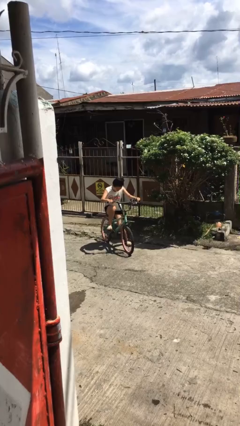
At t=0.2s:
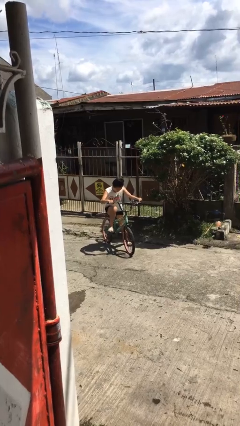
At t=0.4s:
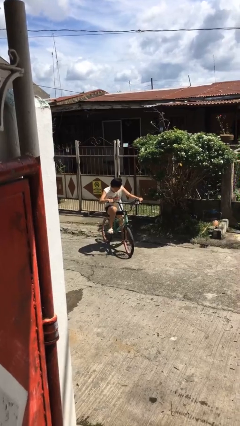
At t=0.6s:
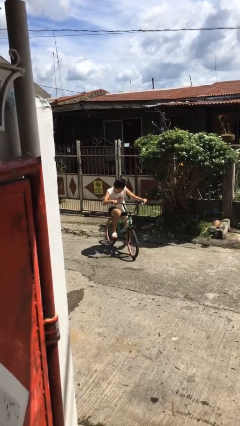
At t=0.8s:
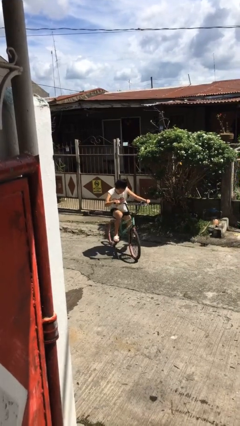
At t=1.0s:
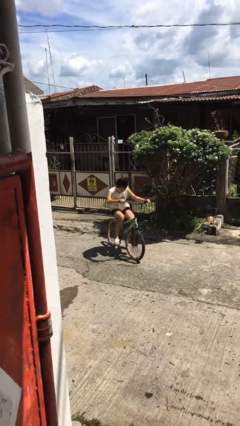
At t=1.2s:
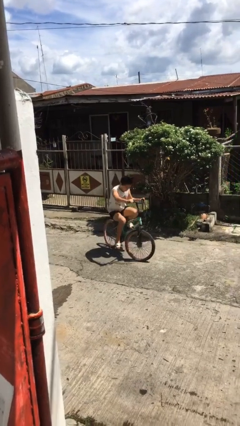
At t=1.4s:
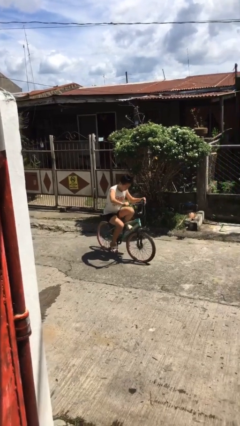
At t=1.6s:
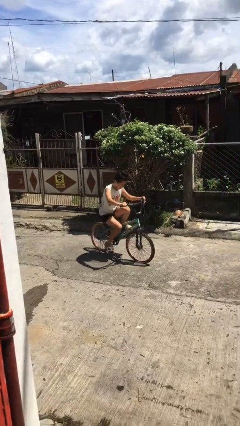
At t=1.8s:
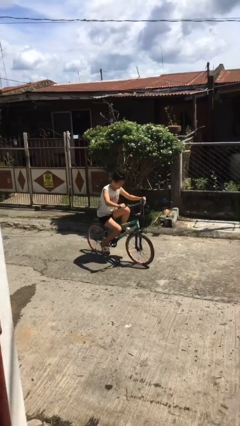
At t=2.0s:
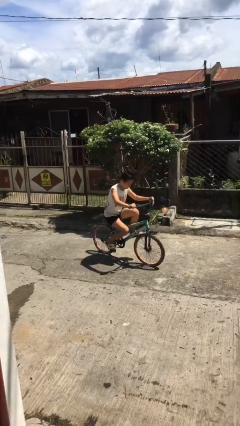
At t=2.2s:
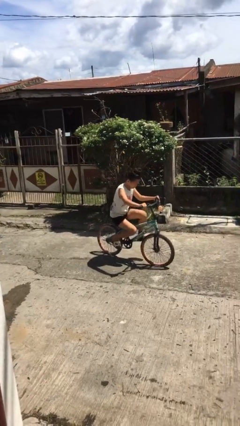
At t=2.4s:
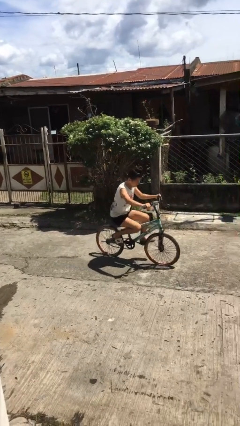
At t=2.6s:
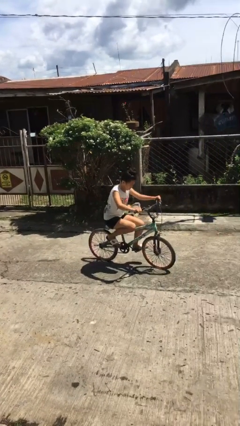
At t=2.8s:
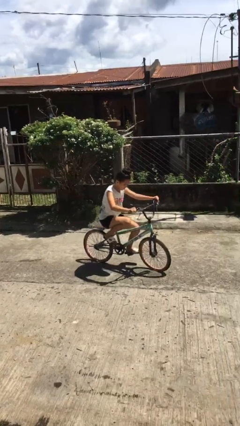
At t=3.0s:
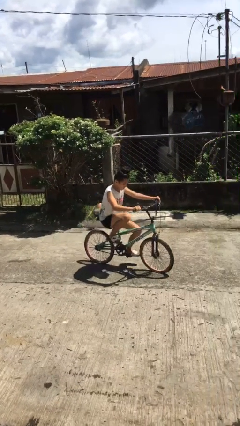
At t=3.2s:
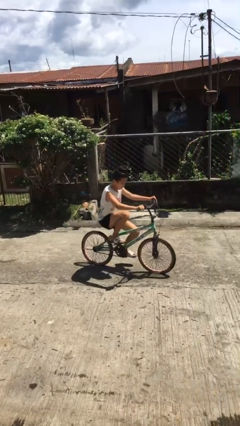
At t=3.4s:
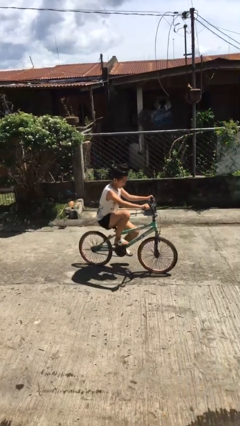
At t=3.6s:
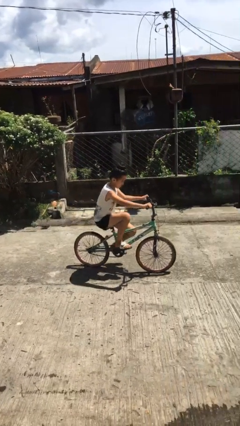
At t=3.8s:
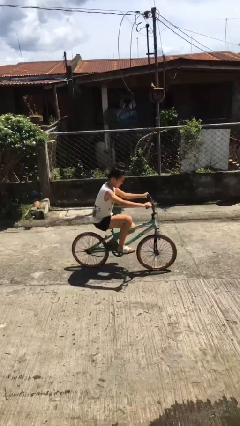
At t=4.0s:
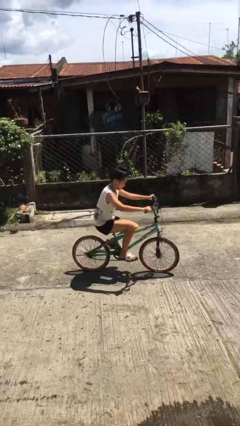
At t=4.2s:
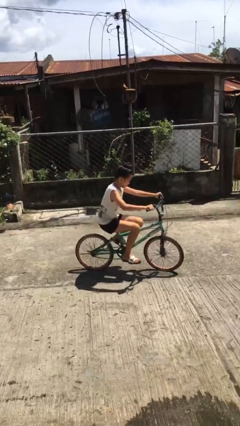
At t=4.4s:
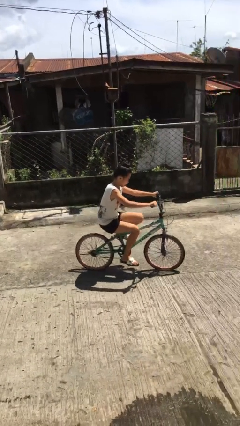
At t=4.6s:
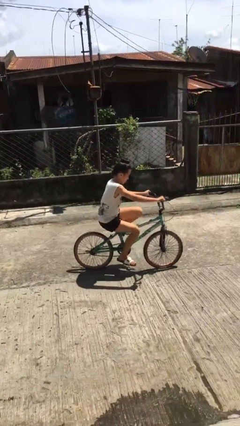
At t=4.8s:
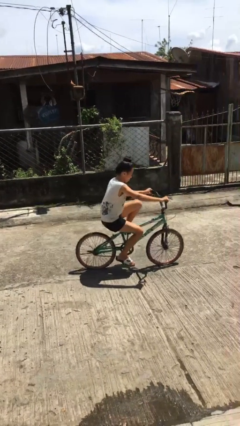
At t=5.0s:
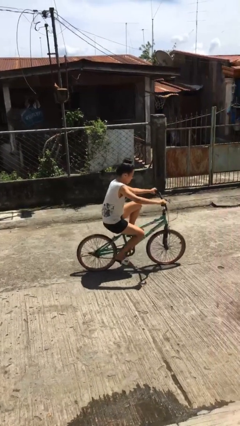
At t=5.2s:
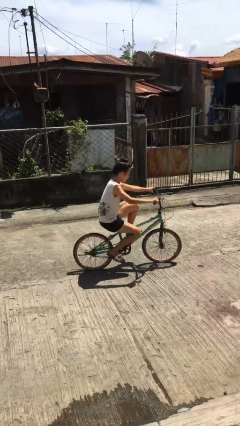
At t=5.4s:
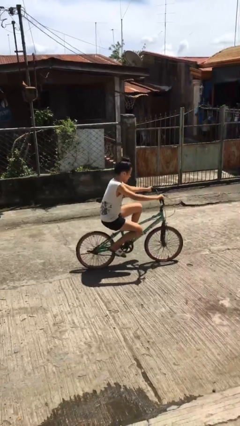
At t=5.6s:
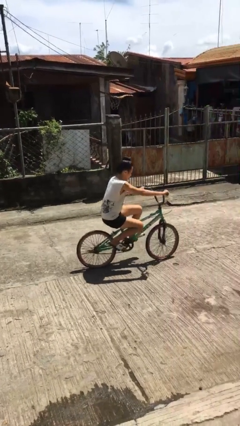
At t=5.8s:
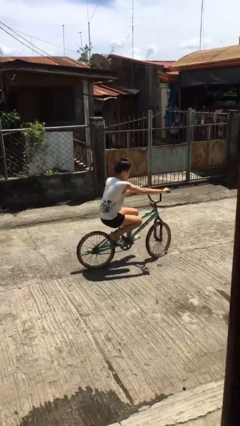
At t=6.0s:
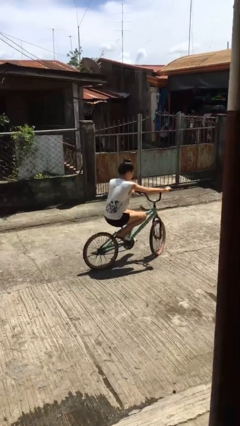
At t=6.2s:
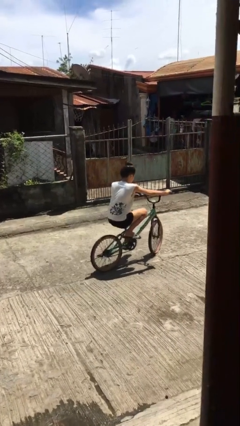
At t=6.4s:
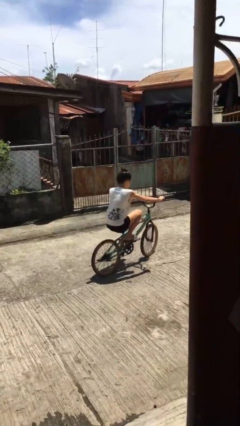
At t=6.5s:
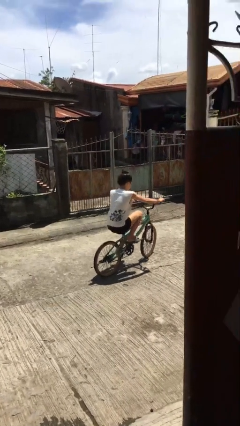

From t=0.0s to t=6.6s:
person rides bicycle

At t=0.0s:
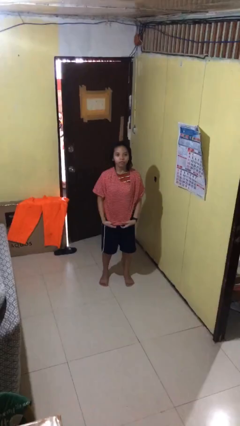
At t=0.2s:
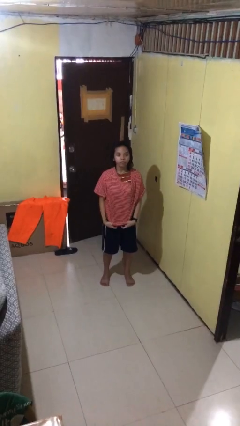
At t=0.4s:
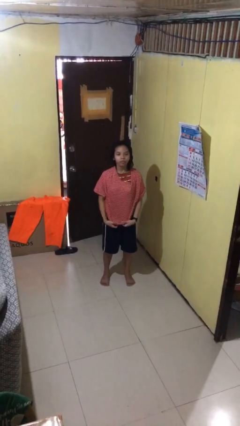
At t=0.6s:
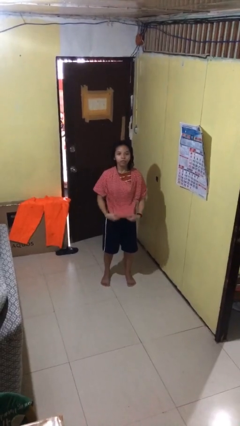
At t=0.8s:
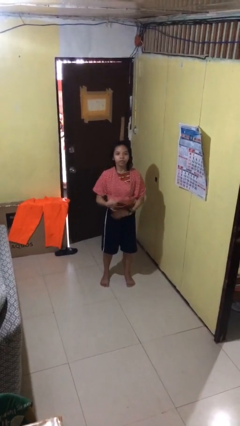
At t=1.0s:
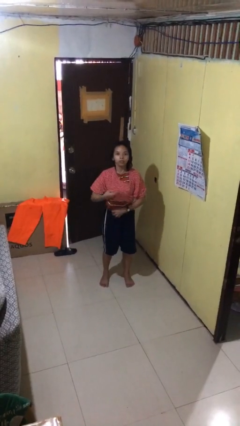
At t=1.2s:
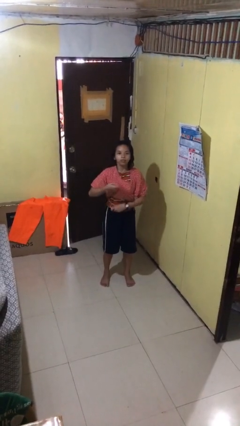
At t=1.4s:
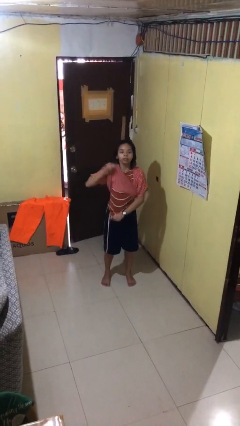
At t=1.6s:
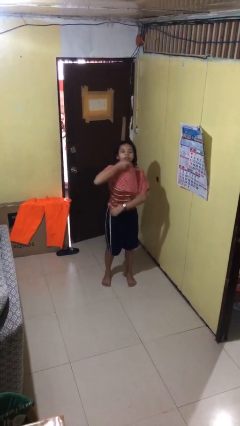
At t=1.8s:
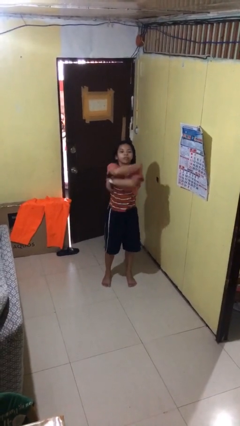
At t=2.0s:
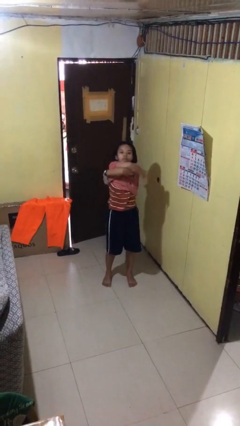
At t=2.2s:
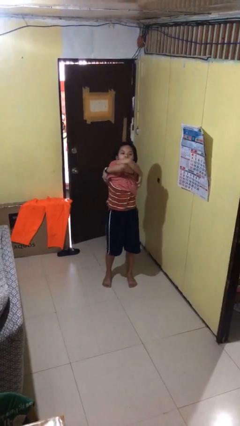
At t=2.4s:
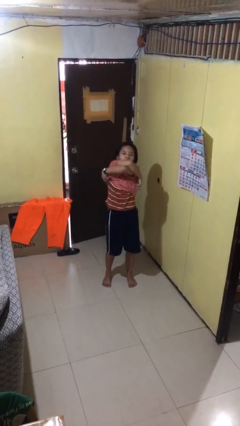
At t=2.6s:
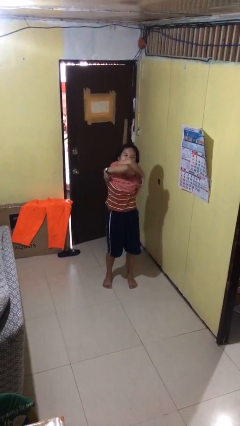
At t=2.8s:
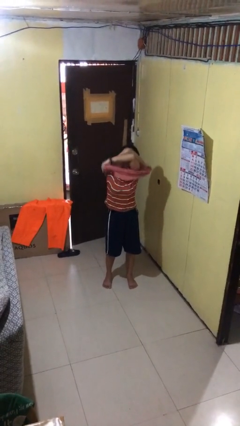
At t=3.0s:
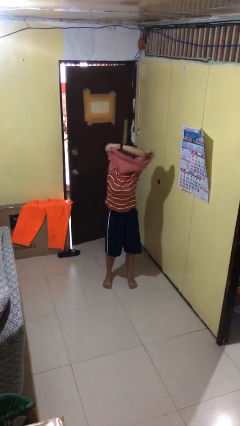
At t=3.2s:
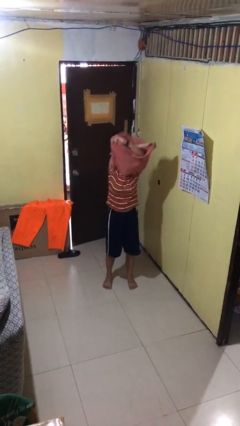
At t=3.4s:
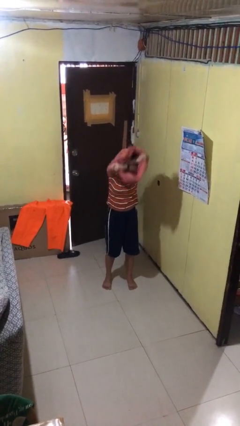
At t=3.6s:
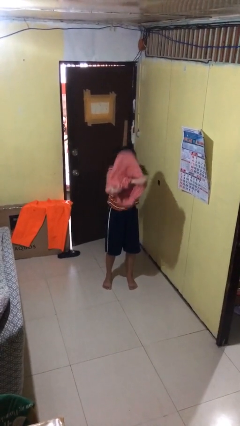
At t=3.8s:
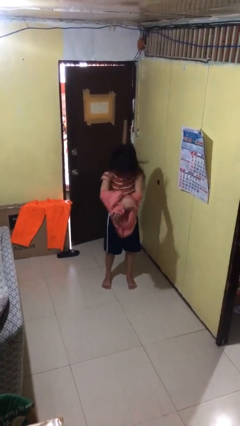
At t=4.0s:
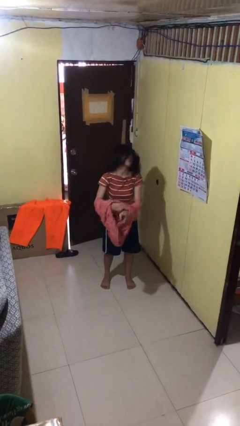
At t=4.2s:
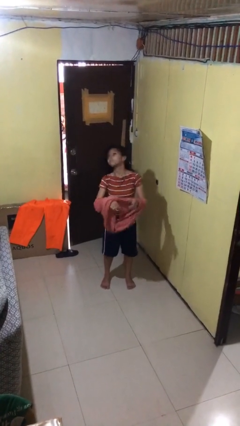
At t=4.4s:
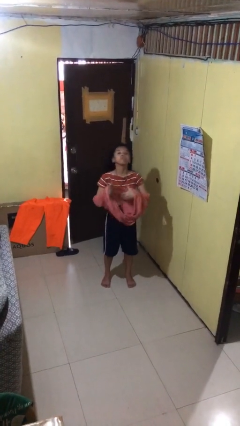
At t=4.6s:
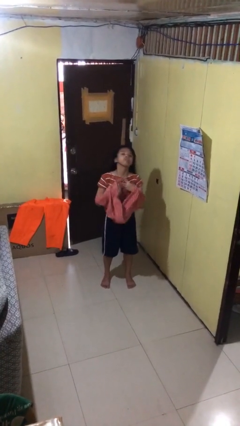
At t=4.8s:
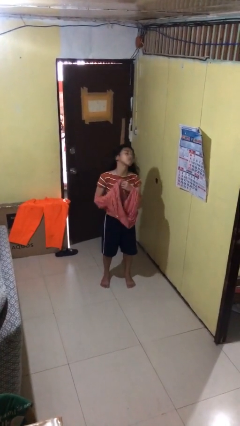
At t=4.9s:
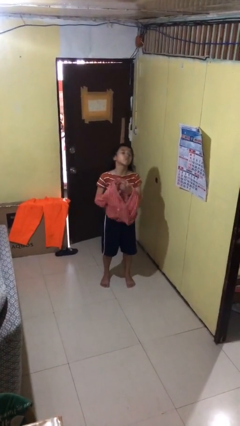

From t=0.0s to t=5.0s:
person takes off shirt

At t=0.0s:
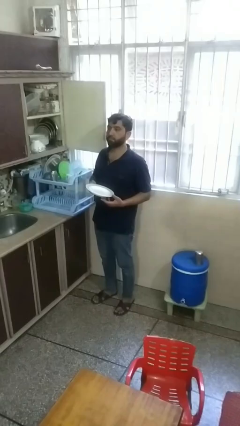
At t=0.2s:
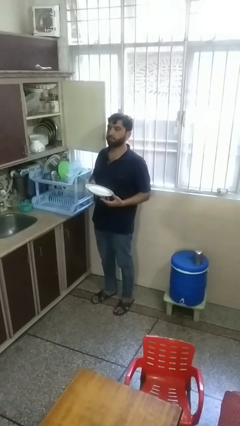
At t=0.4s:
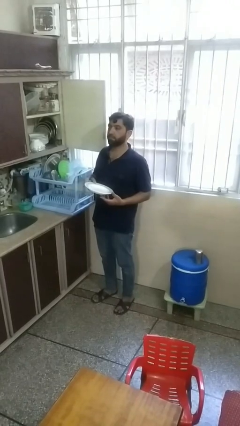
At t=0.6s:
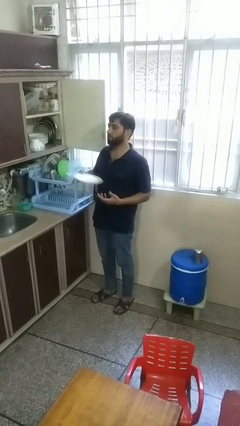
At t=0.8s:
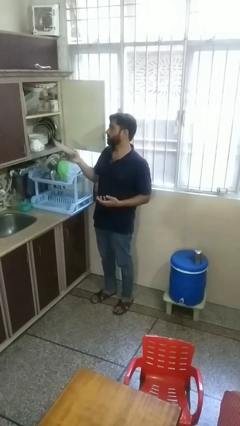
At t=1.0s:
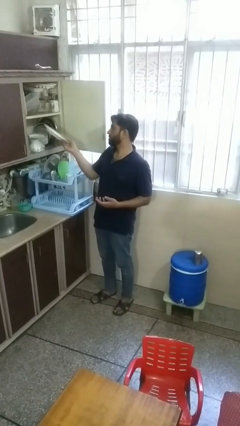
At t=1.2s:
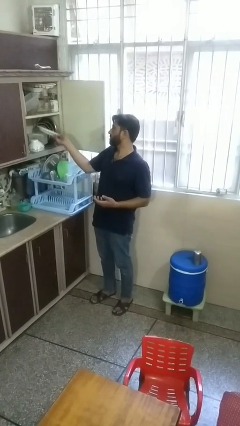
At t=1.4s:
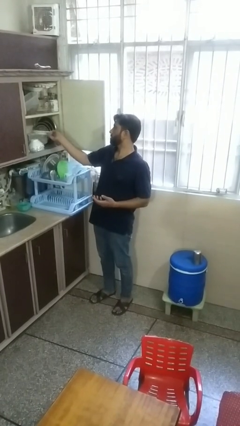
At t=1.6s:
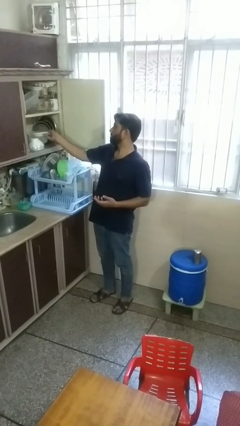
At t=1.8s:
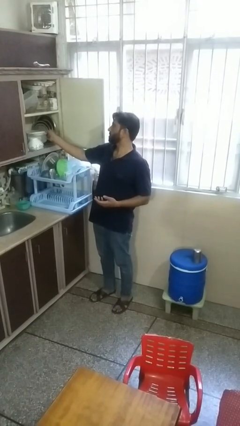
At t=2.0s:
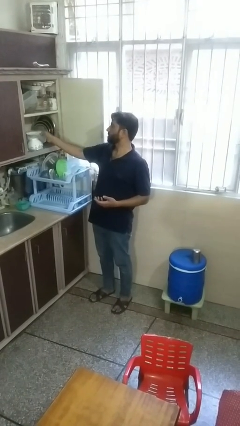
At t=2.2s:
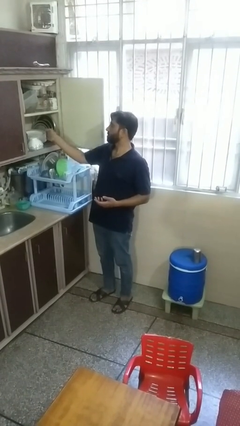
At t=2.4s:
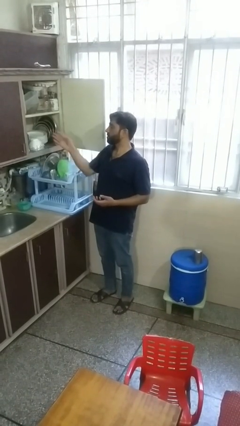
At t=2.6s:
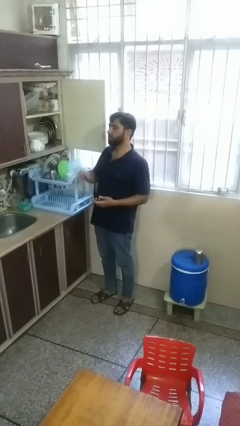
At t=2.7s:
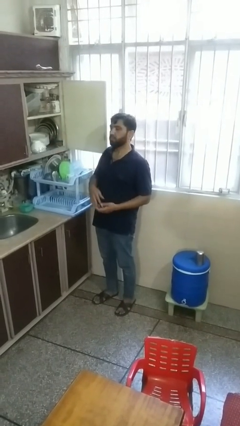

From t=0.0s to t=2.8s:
person puts object in cabinet

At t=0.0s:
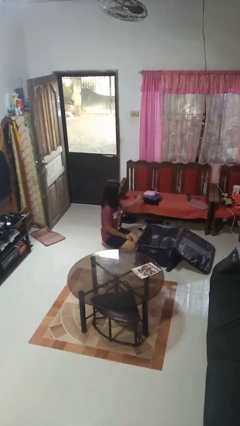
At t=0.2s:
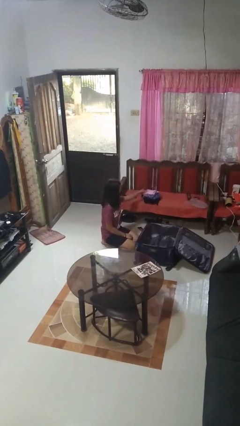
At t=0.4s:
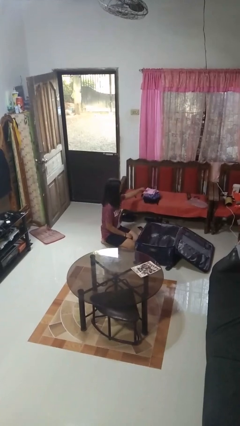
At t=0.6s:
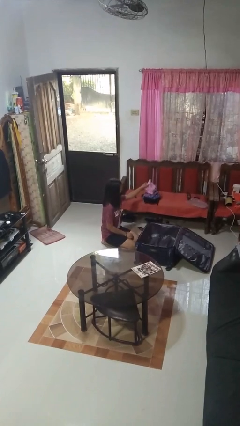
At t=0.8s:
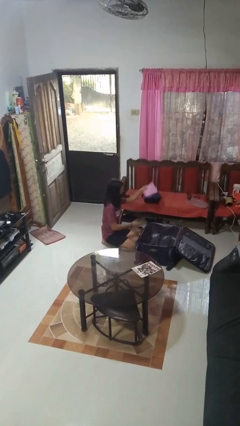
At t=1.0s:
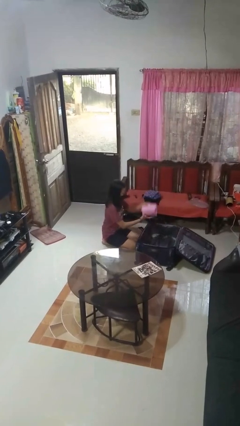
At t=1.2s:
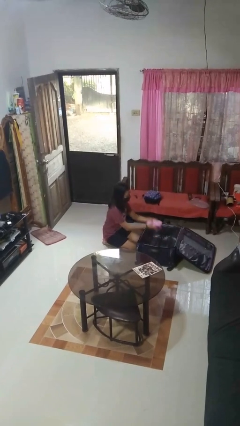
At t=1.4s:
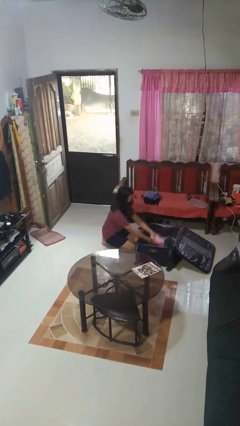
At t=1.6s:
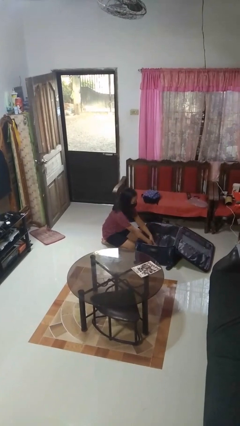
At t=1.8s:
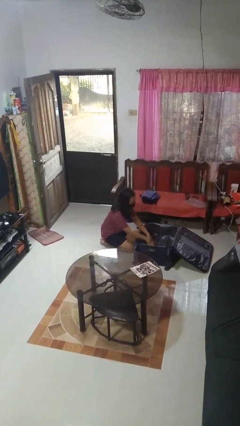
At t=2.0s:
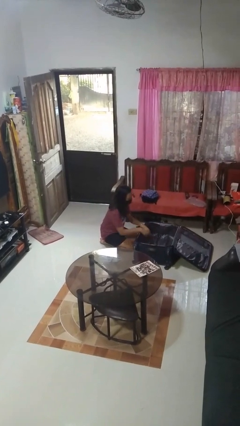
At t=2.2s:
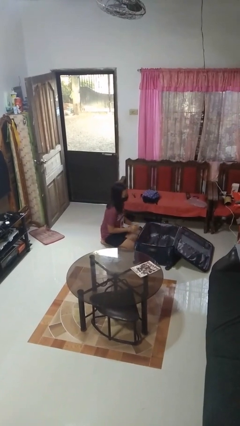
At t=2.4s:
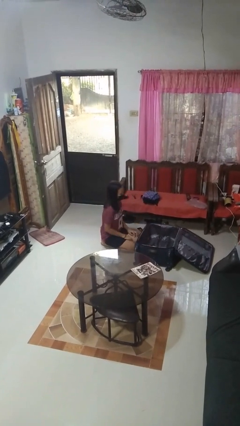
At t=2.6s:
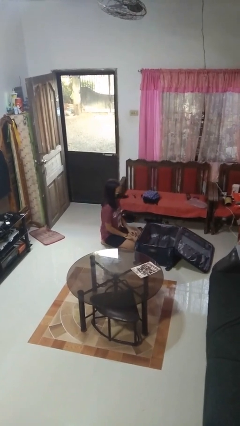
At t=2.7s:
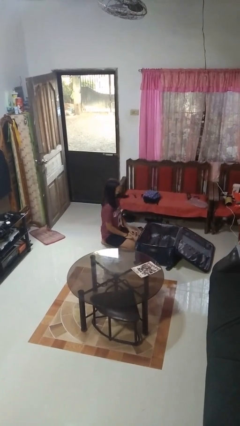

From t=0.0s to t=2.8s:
person loads clothes into suitcase
